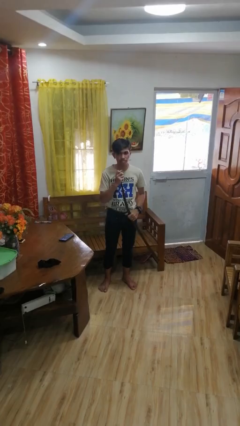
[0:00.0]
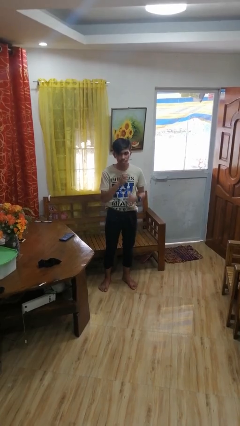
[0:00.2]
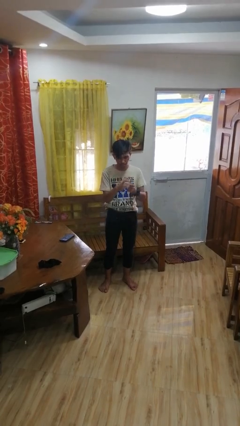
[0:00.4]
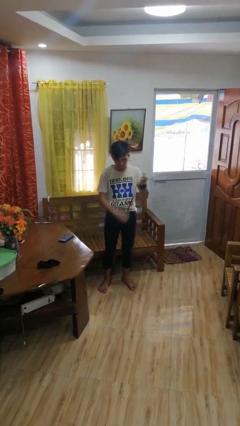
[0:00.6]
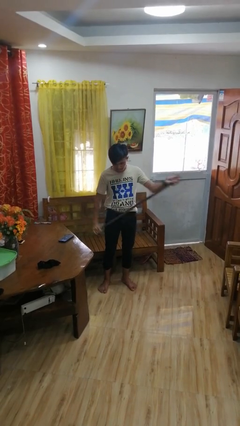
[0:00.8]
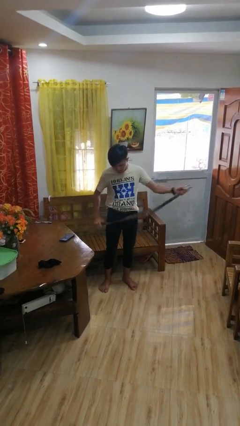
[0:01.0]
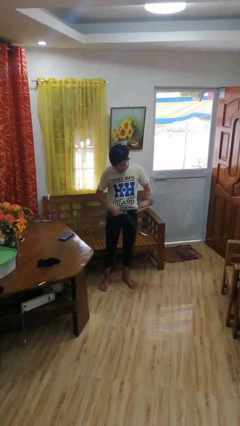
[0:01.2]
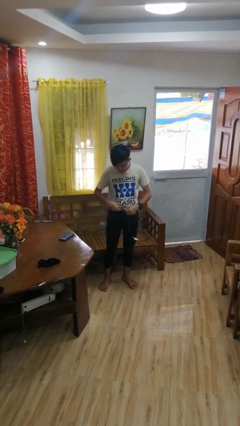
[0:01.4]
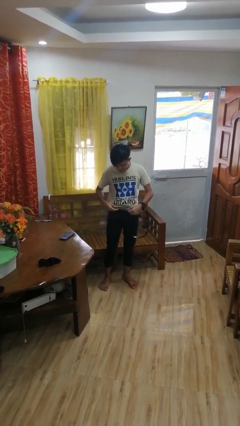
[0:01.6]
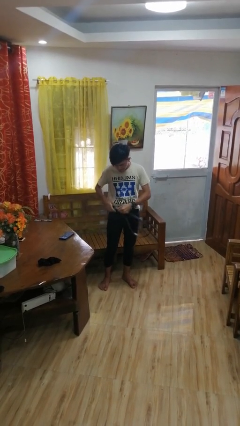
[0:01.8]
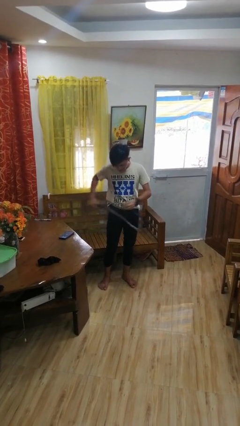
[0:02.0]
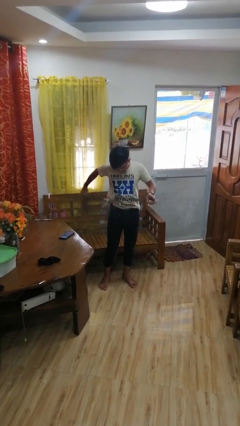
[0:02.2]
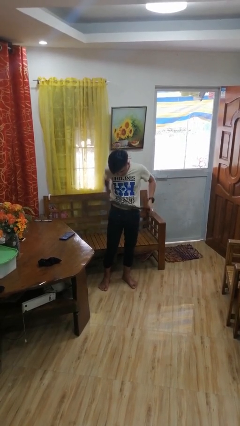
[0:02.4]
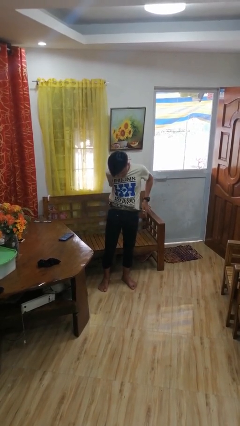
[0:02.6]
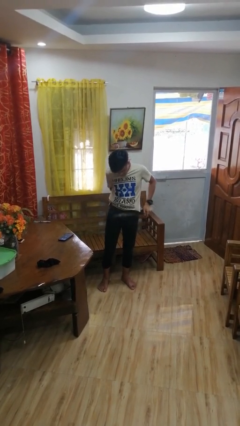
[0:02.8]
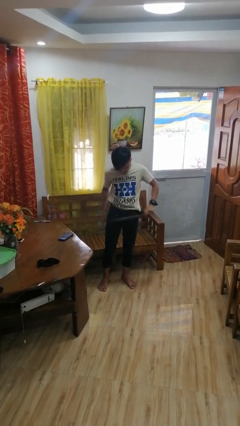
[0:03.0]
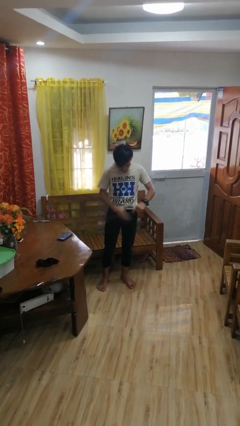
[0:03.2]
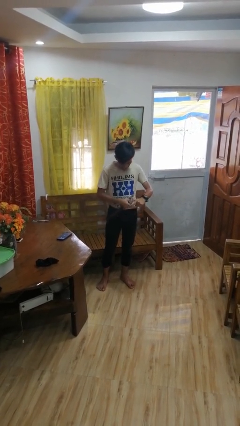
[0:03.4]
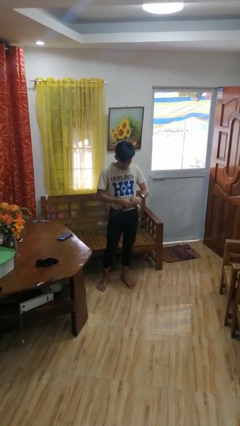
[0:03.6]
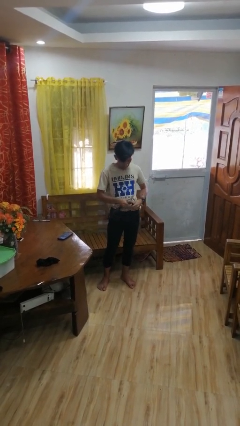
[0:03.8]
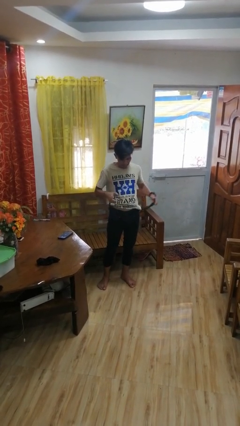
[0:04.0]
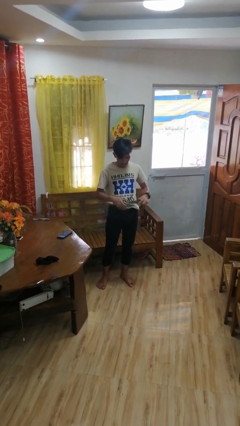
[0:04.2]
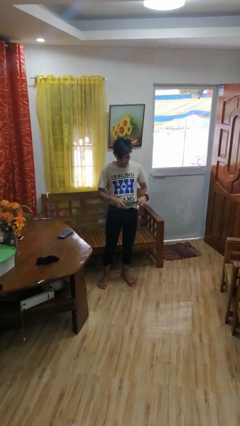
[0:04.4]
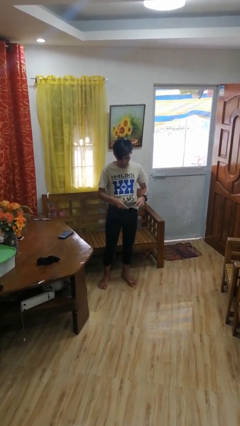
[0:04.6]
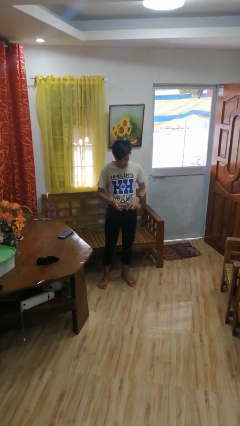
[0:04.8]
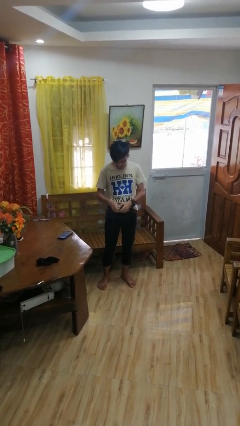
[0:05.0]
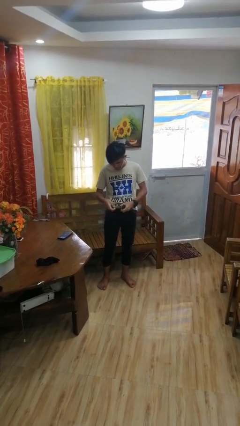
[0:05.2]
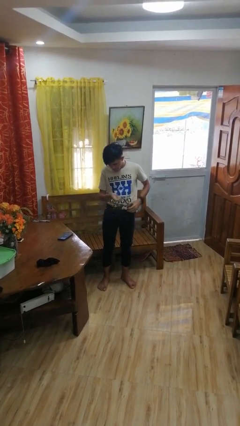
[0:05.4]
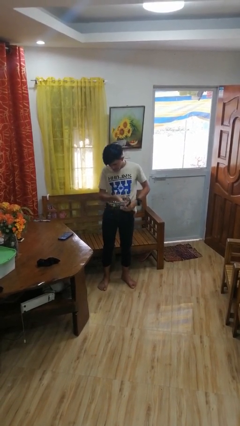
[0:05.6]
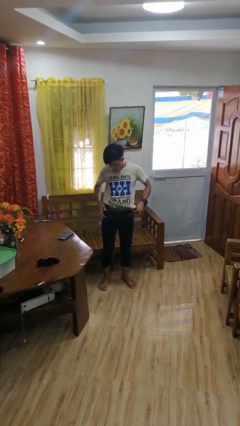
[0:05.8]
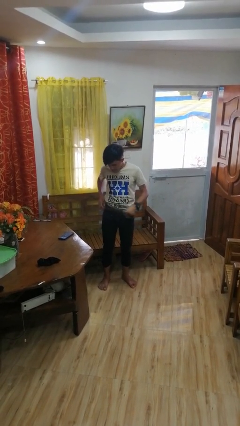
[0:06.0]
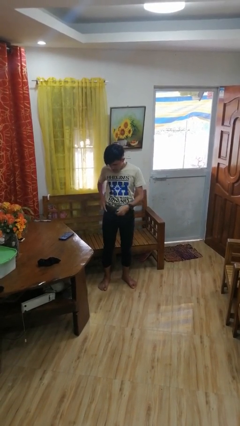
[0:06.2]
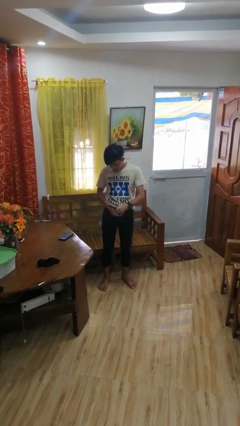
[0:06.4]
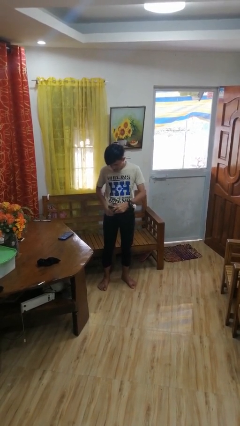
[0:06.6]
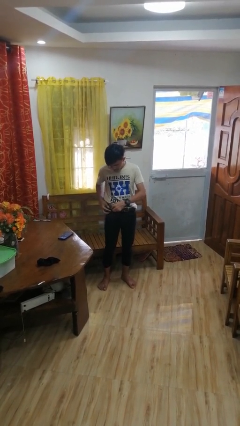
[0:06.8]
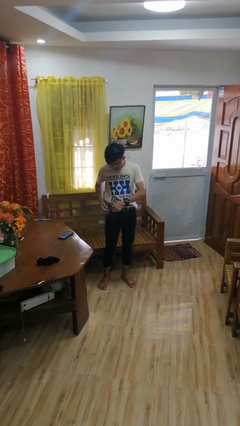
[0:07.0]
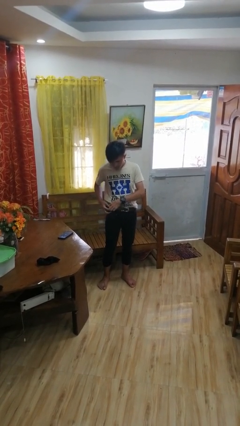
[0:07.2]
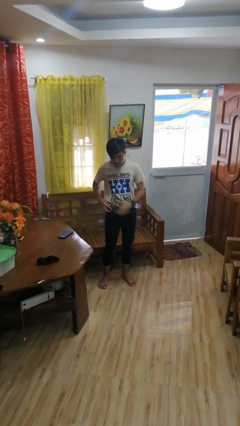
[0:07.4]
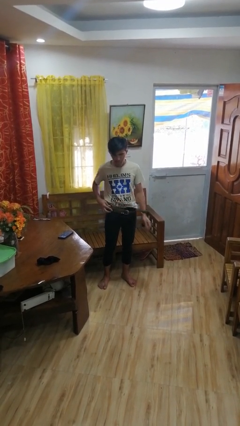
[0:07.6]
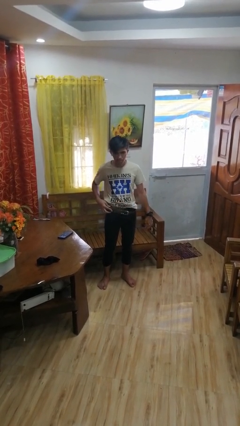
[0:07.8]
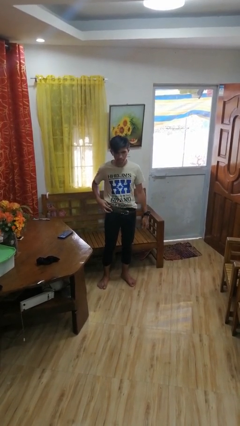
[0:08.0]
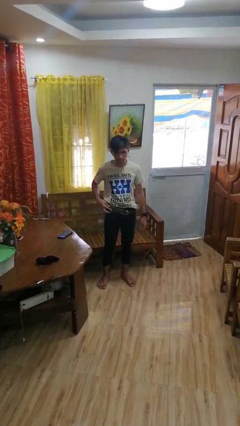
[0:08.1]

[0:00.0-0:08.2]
person puts on belt

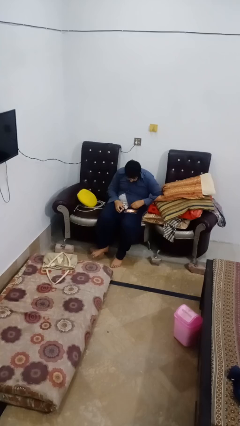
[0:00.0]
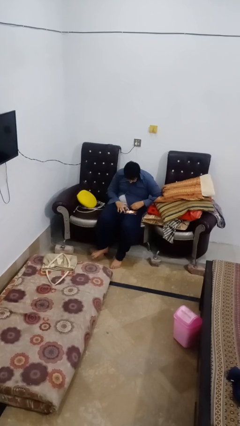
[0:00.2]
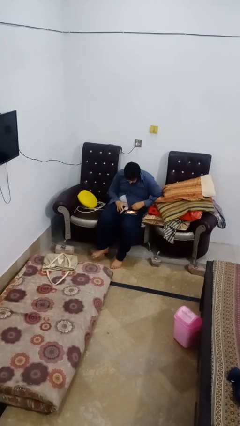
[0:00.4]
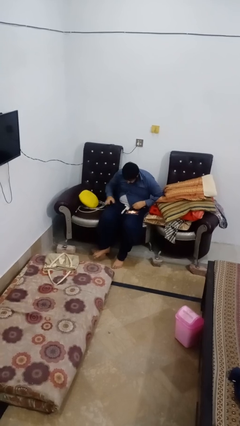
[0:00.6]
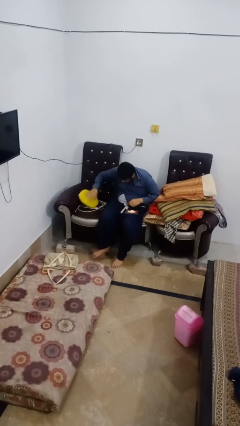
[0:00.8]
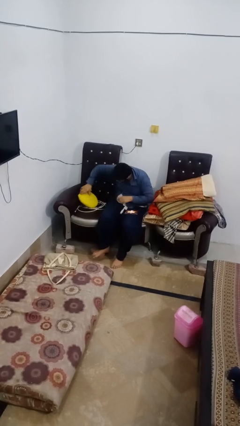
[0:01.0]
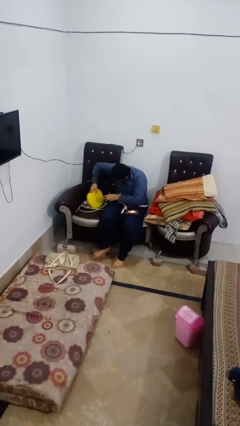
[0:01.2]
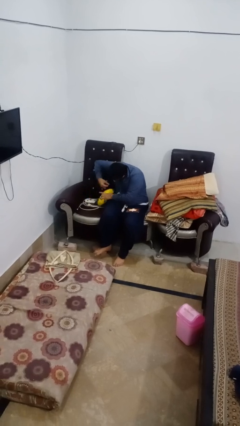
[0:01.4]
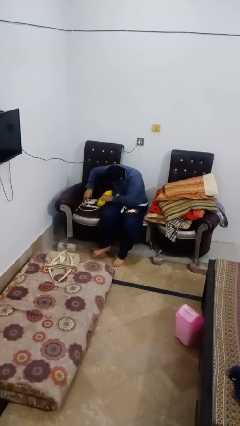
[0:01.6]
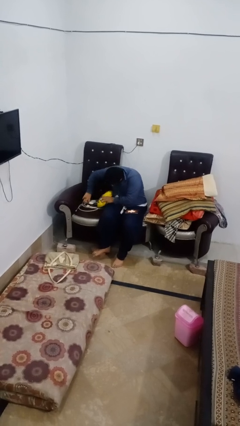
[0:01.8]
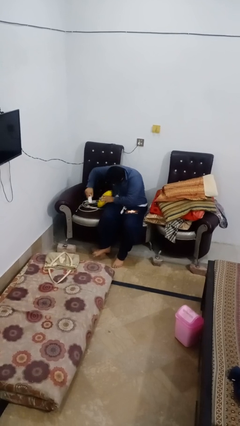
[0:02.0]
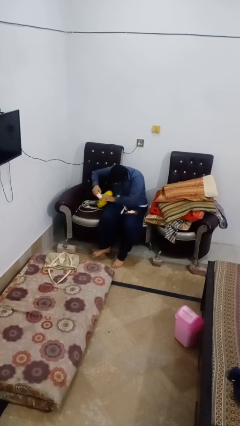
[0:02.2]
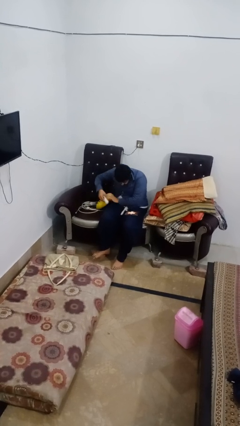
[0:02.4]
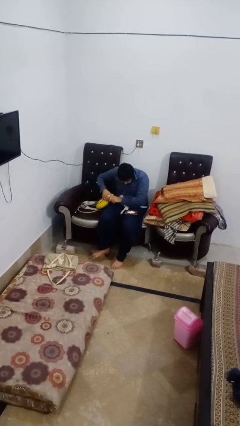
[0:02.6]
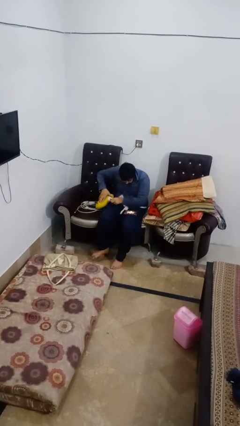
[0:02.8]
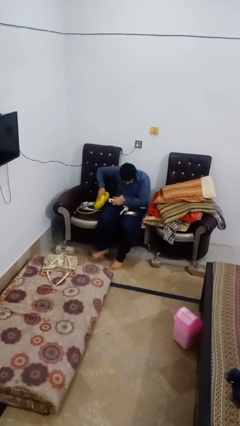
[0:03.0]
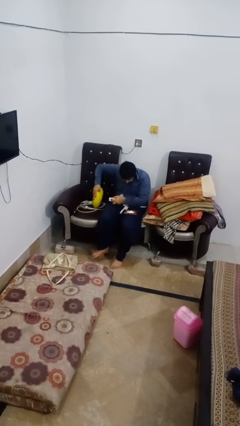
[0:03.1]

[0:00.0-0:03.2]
person searches in couch

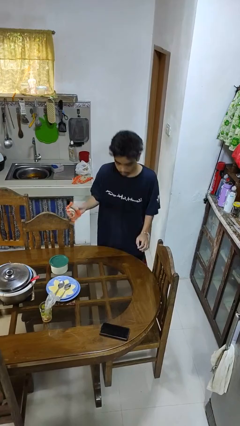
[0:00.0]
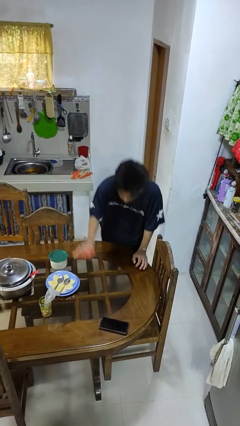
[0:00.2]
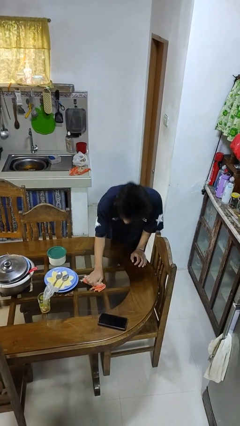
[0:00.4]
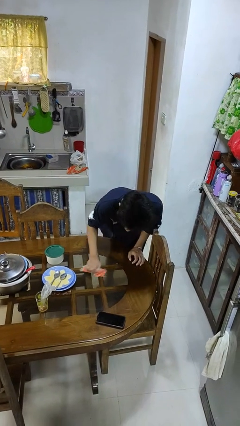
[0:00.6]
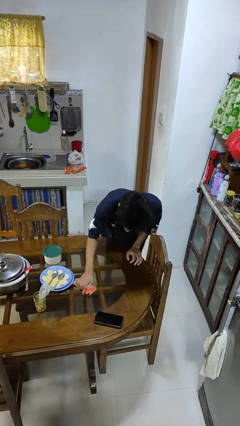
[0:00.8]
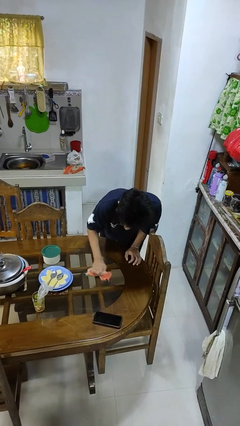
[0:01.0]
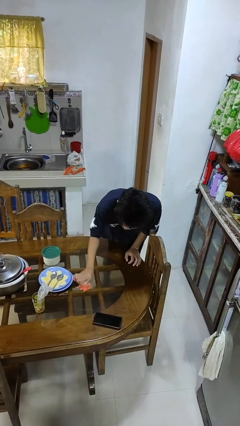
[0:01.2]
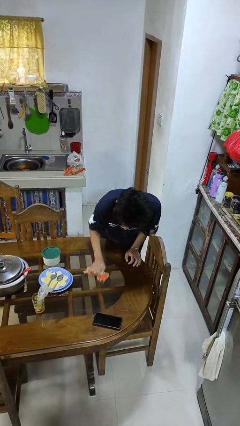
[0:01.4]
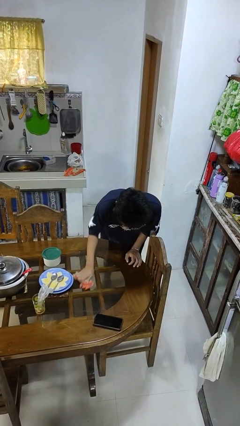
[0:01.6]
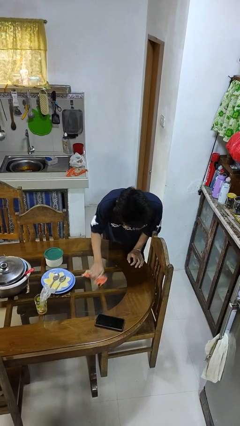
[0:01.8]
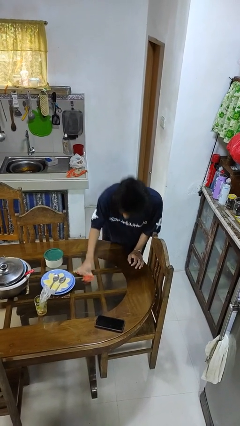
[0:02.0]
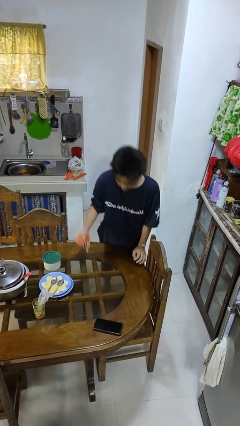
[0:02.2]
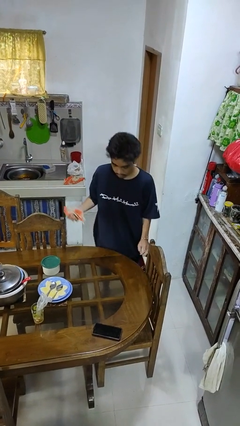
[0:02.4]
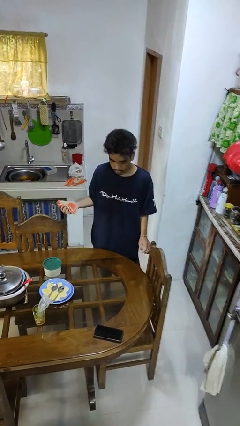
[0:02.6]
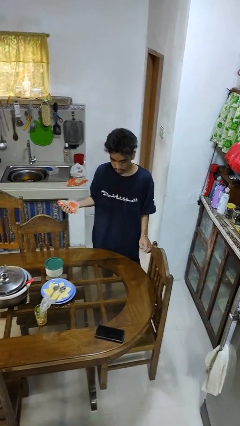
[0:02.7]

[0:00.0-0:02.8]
person cleans table with rag

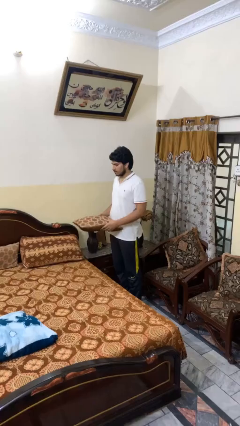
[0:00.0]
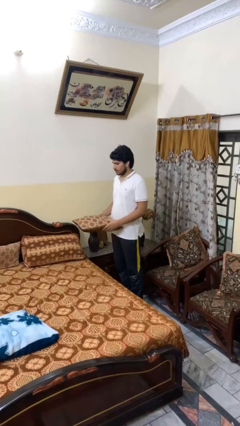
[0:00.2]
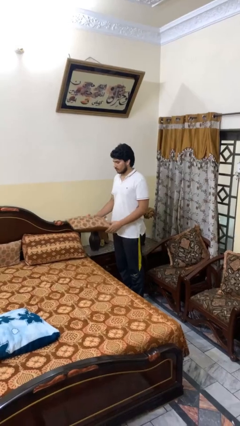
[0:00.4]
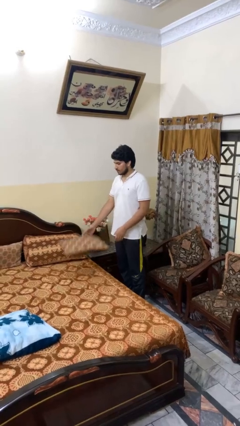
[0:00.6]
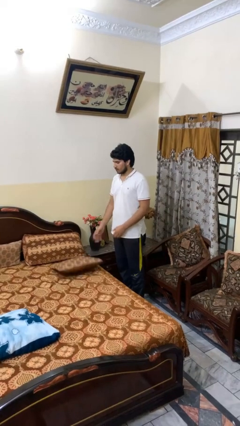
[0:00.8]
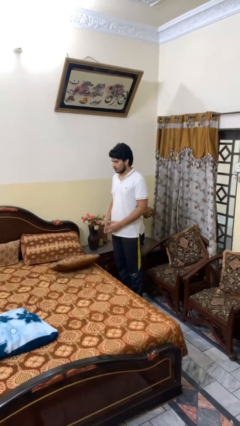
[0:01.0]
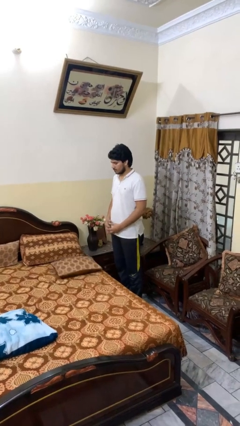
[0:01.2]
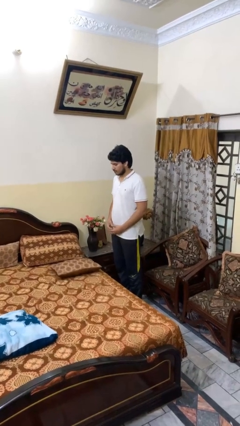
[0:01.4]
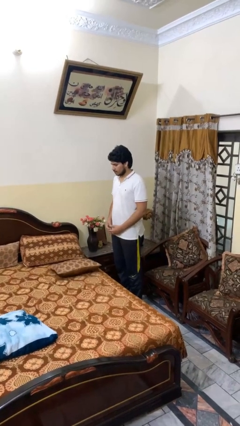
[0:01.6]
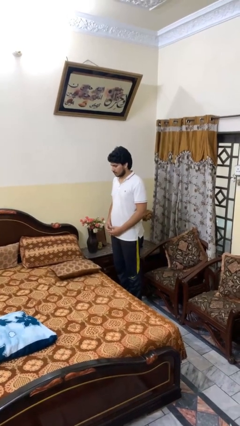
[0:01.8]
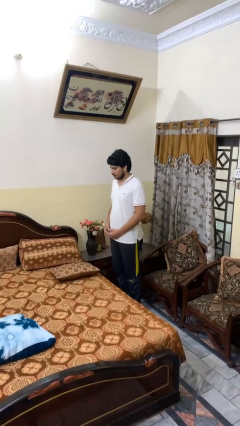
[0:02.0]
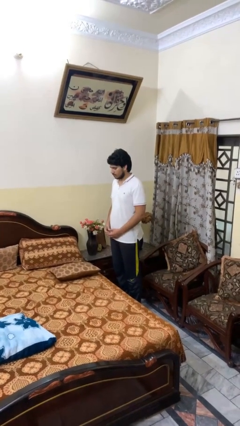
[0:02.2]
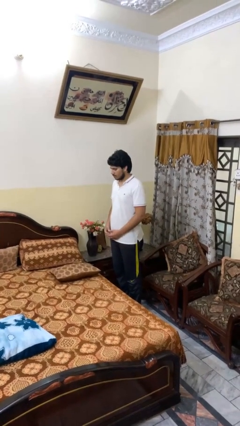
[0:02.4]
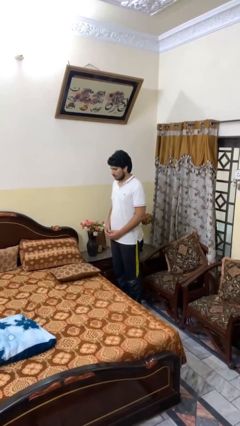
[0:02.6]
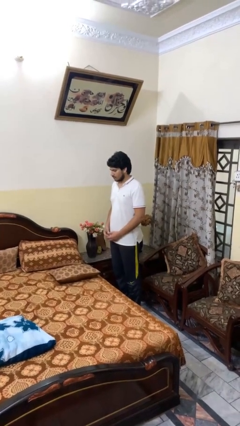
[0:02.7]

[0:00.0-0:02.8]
person puts down object on bed

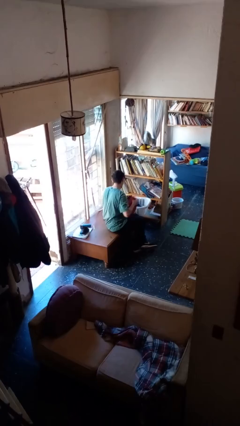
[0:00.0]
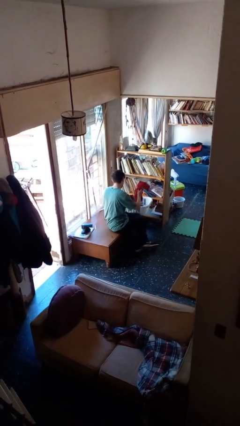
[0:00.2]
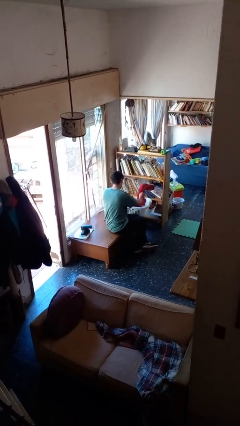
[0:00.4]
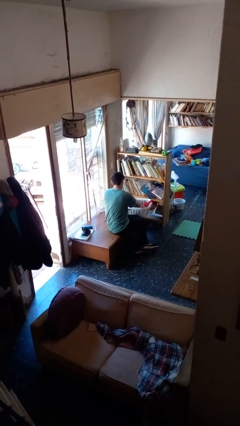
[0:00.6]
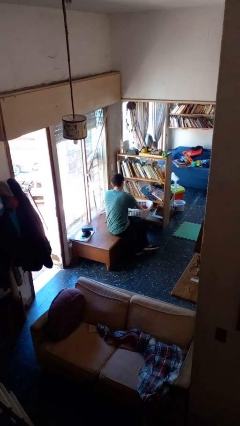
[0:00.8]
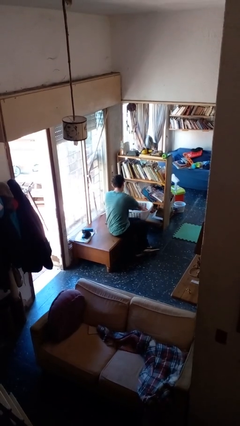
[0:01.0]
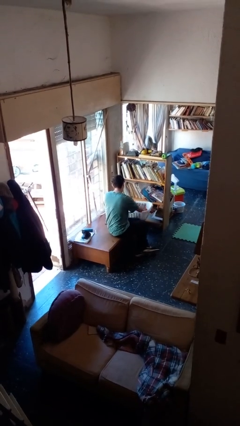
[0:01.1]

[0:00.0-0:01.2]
person puts object into basket
